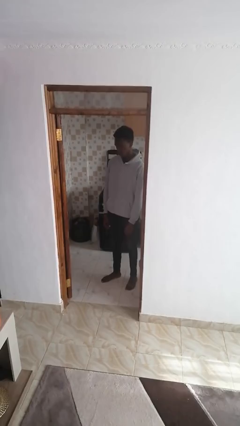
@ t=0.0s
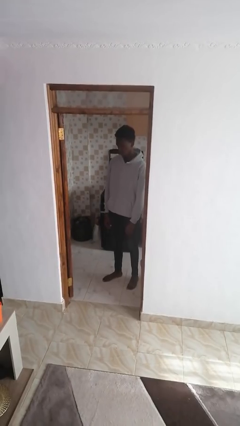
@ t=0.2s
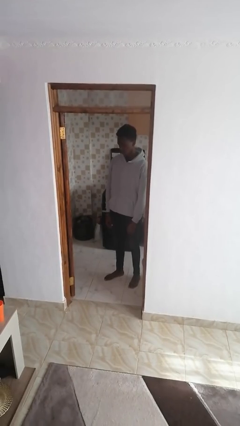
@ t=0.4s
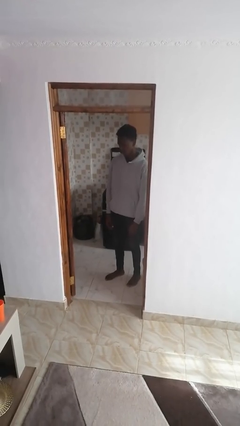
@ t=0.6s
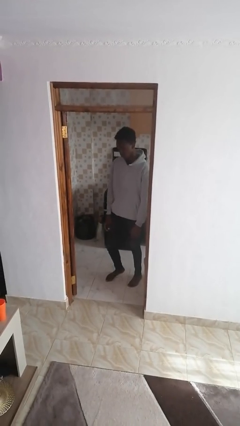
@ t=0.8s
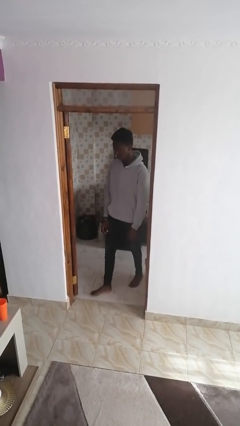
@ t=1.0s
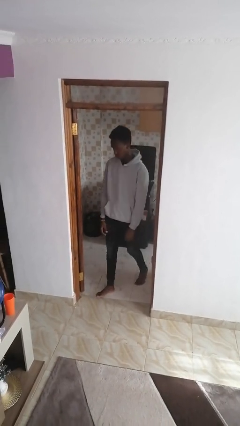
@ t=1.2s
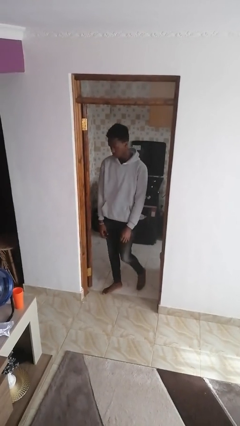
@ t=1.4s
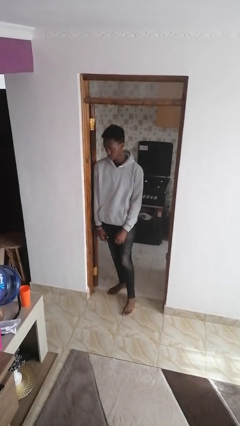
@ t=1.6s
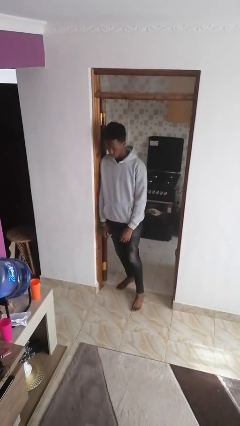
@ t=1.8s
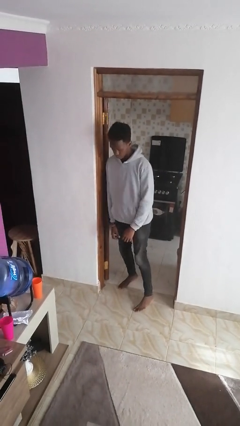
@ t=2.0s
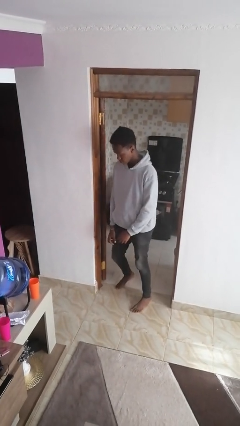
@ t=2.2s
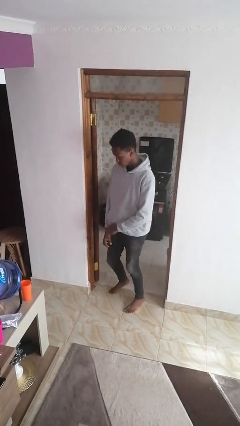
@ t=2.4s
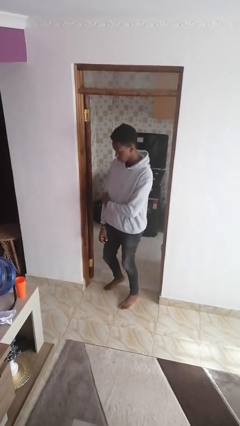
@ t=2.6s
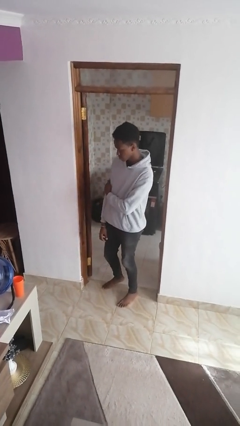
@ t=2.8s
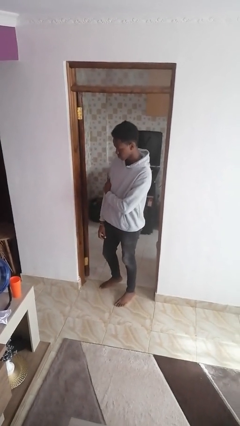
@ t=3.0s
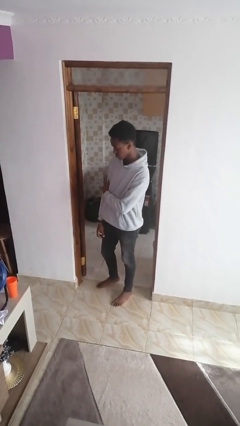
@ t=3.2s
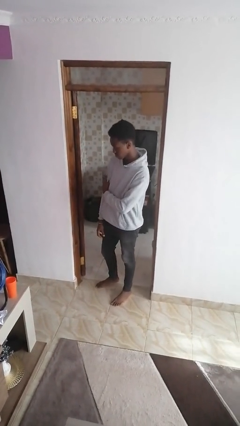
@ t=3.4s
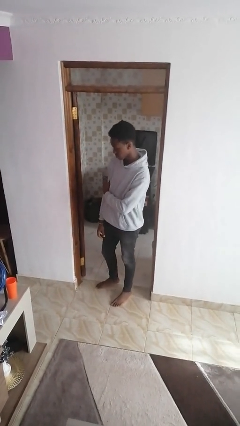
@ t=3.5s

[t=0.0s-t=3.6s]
person bumps into wall

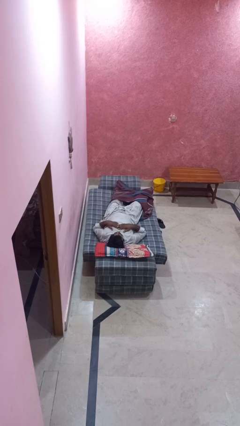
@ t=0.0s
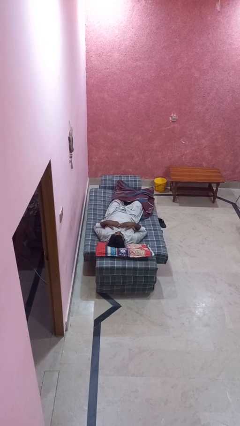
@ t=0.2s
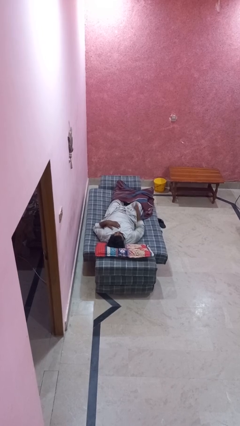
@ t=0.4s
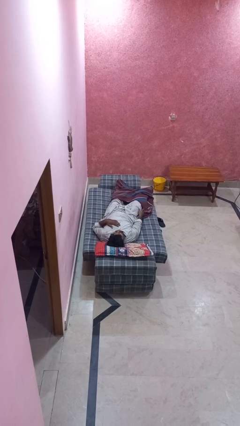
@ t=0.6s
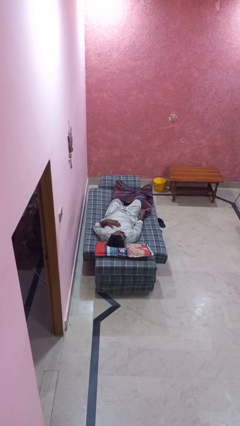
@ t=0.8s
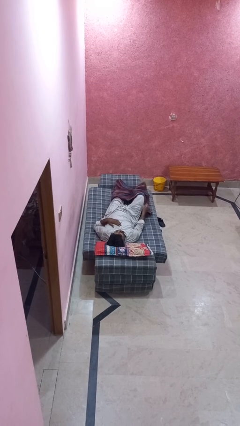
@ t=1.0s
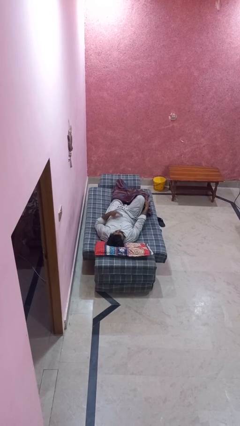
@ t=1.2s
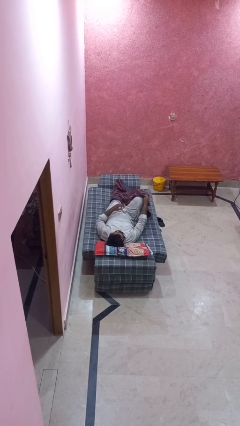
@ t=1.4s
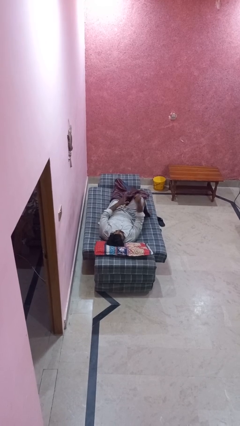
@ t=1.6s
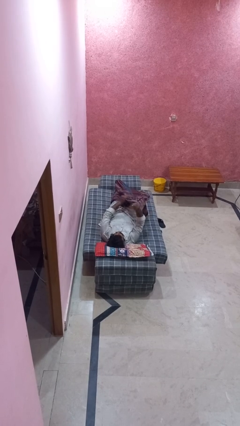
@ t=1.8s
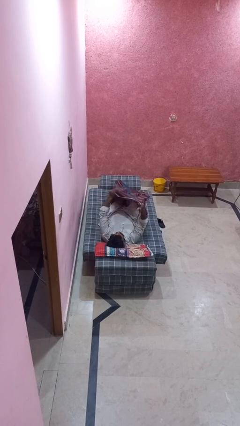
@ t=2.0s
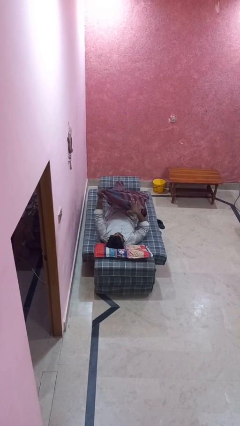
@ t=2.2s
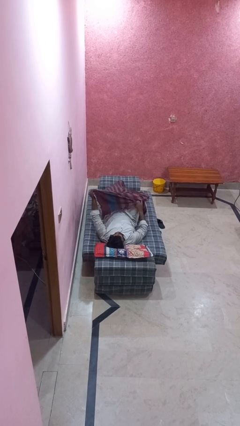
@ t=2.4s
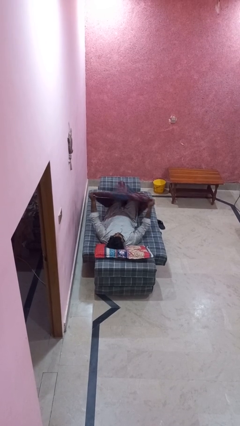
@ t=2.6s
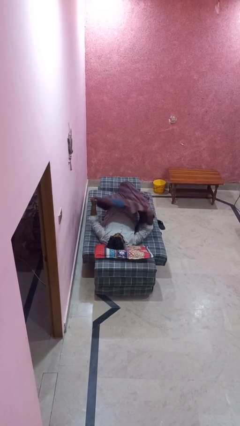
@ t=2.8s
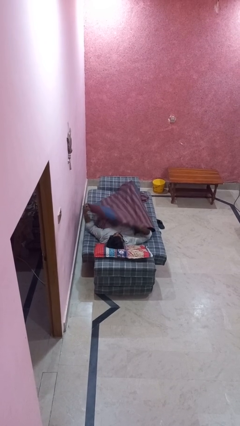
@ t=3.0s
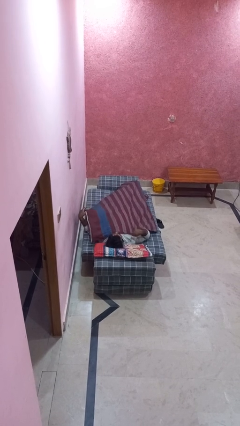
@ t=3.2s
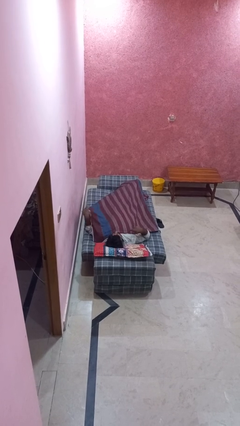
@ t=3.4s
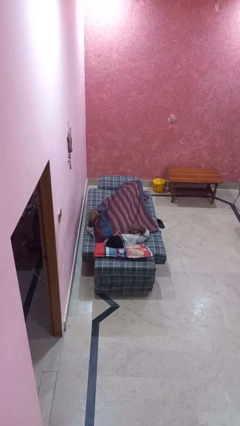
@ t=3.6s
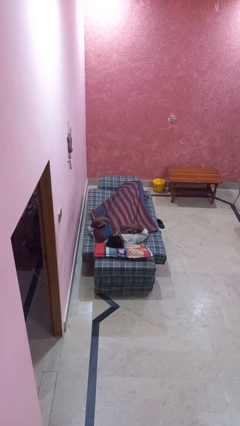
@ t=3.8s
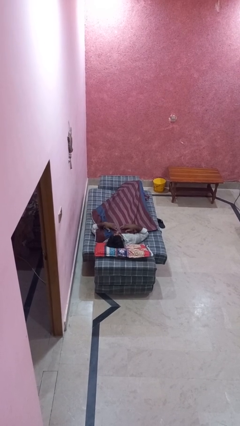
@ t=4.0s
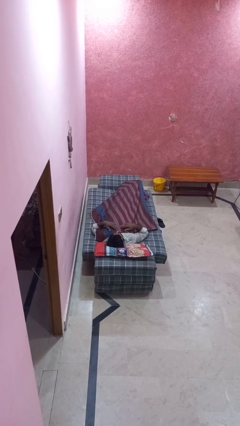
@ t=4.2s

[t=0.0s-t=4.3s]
person covers with bedsheets

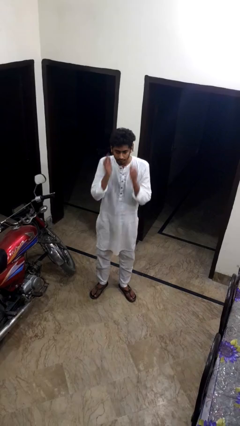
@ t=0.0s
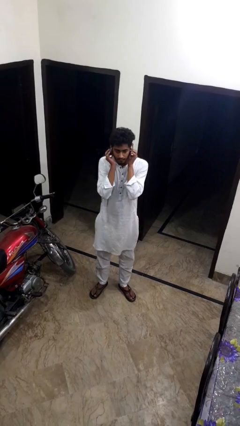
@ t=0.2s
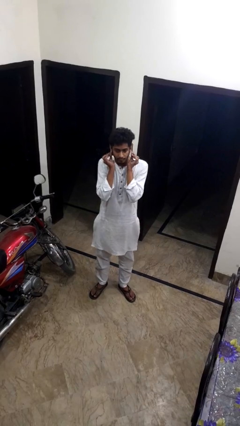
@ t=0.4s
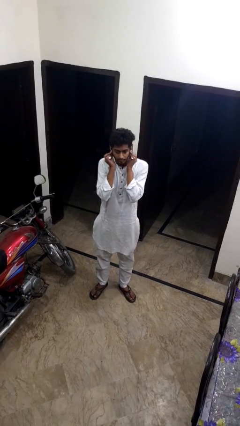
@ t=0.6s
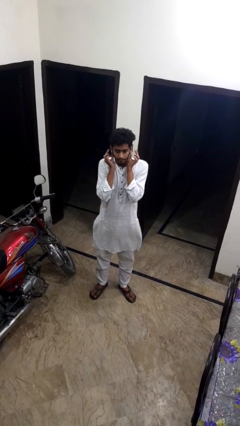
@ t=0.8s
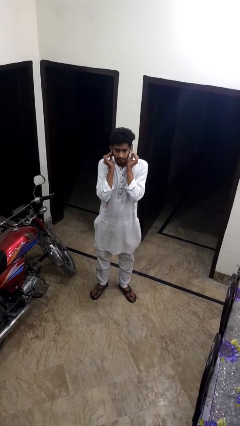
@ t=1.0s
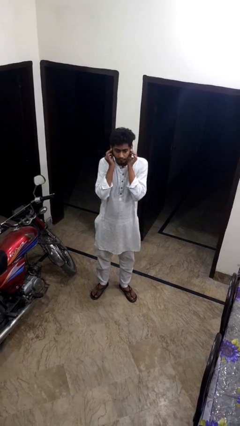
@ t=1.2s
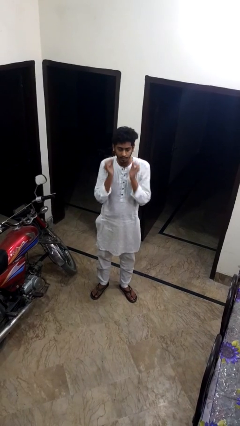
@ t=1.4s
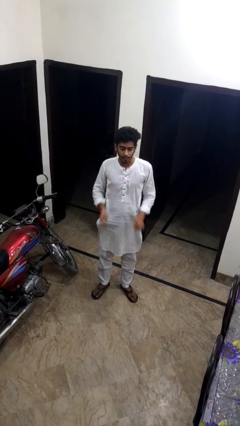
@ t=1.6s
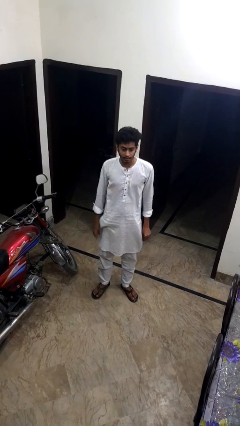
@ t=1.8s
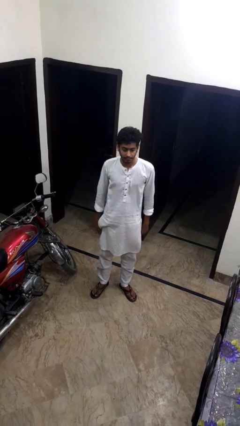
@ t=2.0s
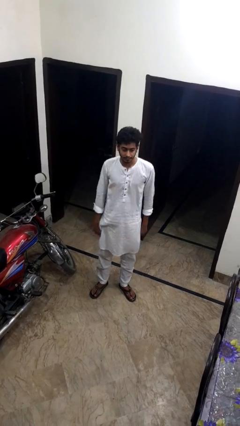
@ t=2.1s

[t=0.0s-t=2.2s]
person touches earlobe

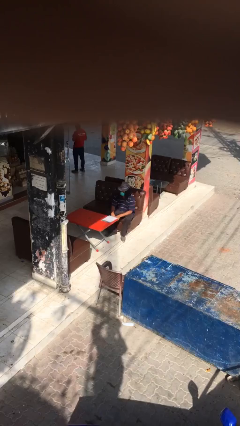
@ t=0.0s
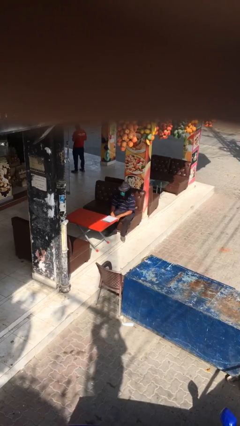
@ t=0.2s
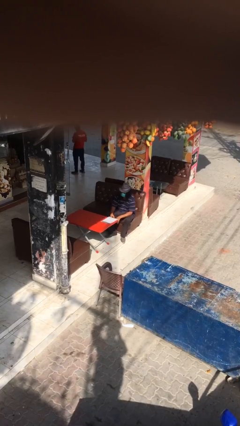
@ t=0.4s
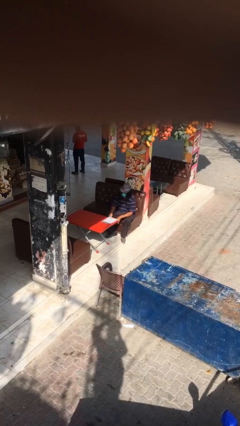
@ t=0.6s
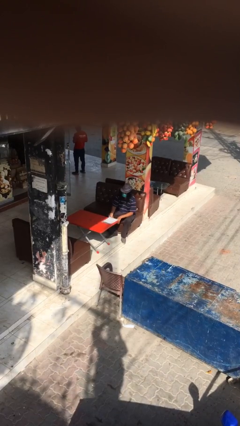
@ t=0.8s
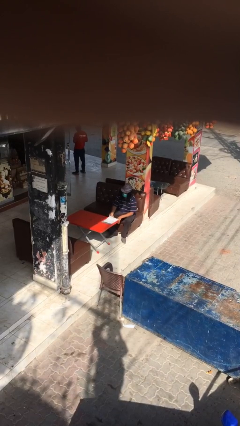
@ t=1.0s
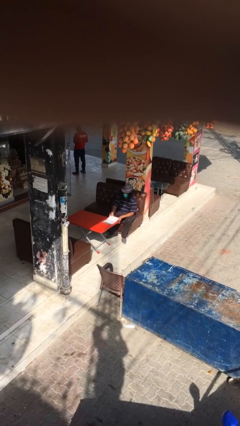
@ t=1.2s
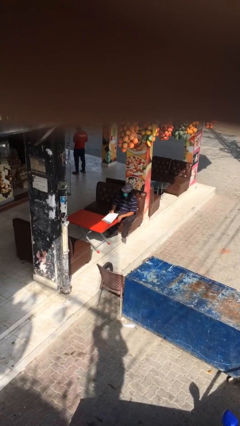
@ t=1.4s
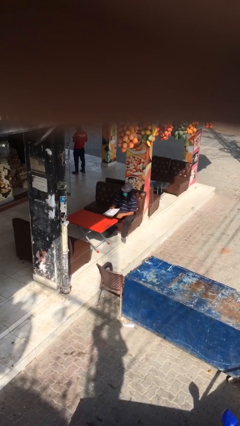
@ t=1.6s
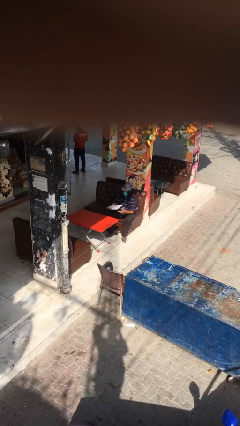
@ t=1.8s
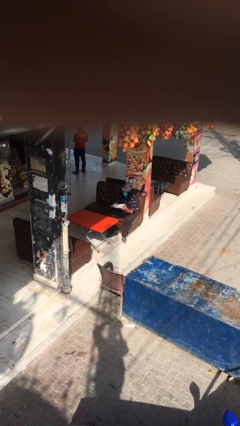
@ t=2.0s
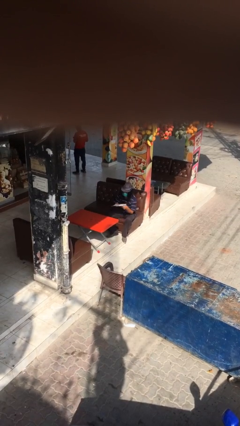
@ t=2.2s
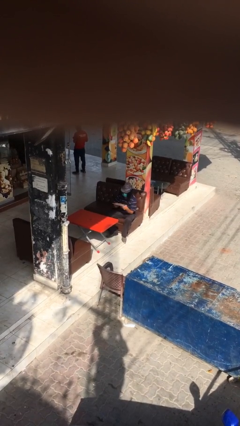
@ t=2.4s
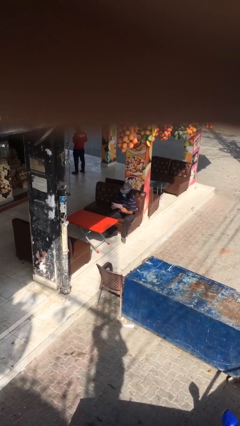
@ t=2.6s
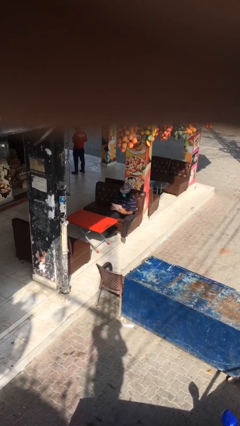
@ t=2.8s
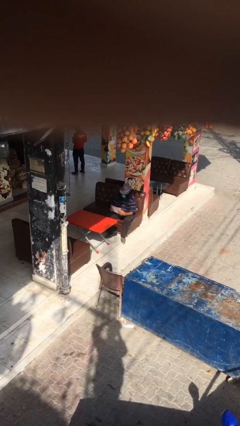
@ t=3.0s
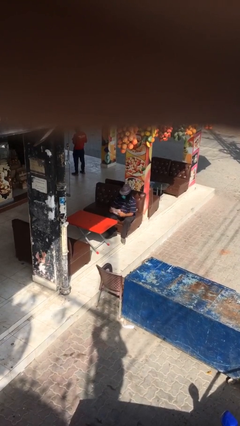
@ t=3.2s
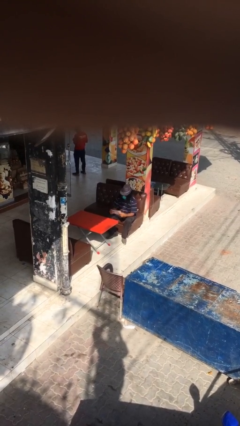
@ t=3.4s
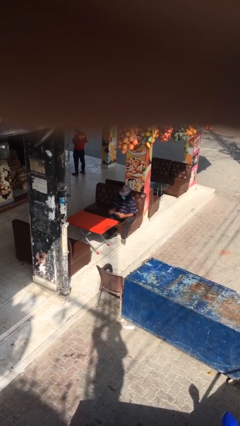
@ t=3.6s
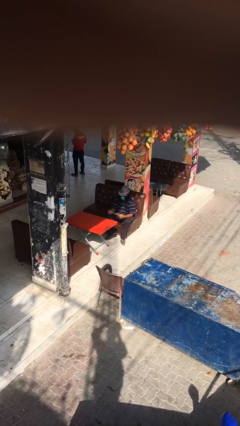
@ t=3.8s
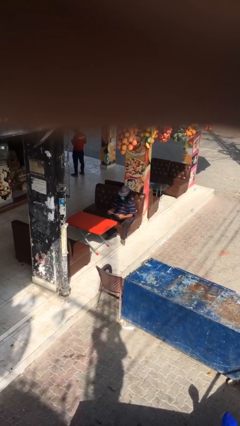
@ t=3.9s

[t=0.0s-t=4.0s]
person picks up object from table

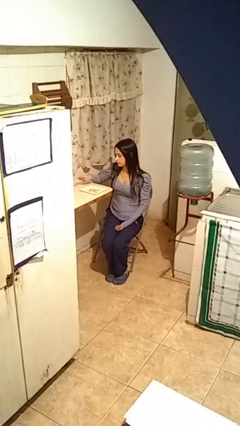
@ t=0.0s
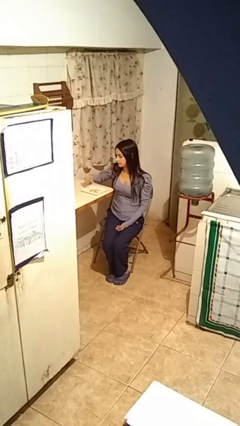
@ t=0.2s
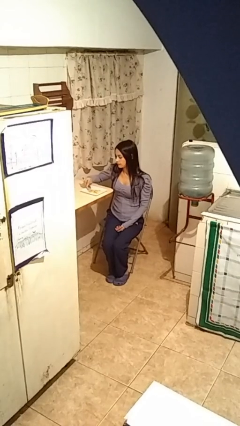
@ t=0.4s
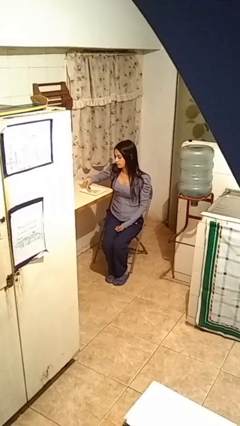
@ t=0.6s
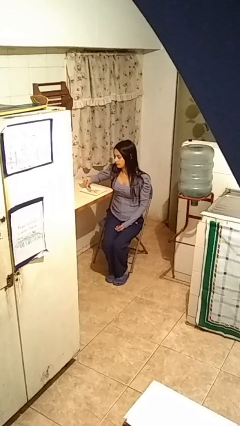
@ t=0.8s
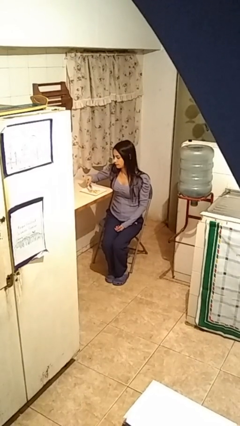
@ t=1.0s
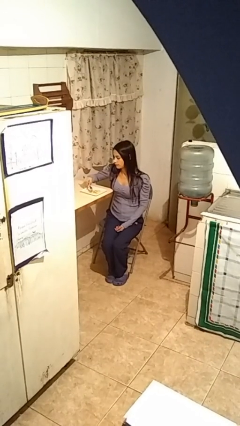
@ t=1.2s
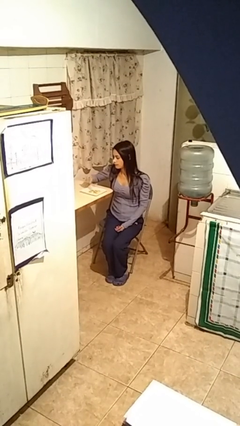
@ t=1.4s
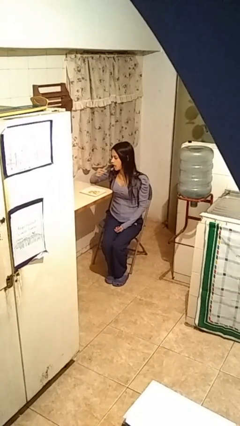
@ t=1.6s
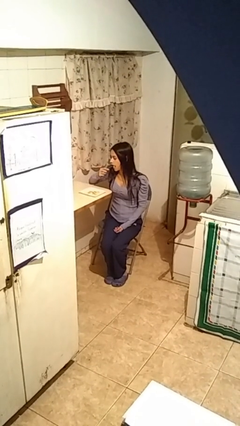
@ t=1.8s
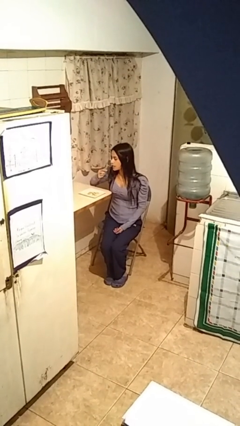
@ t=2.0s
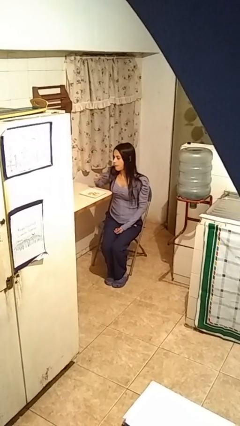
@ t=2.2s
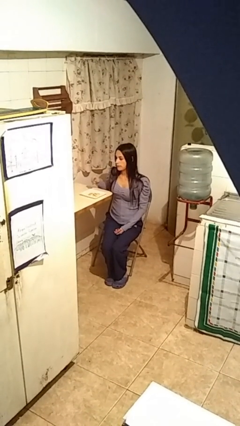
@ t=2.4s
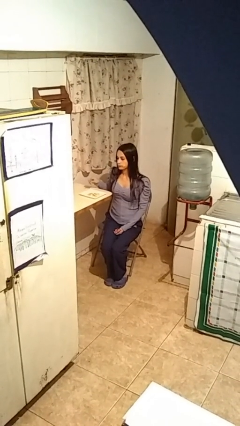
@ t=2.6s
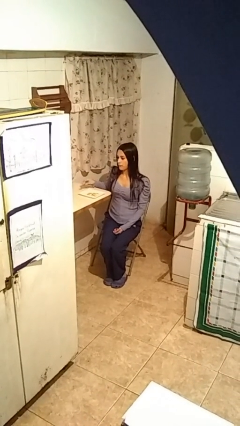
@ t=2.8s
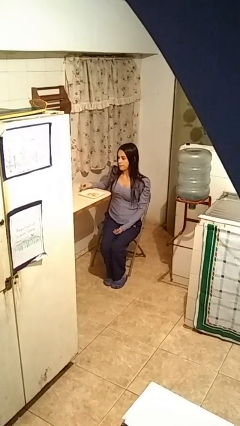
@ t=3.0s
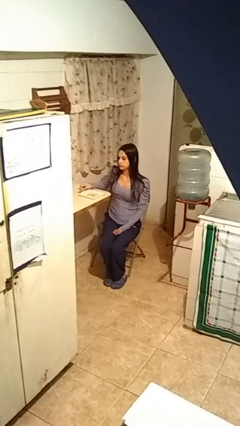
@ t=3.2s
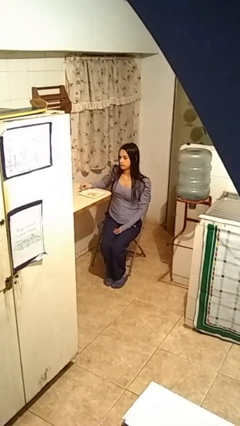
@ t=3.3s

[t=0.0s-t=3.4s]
person eats with utensil
